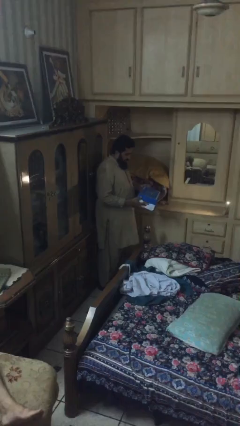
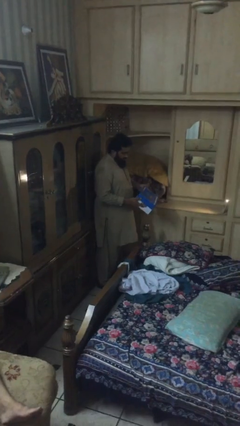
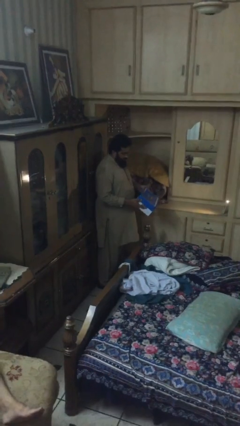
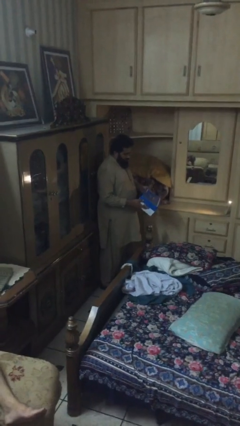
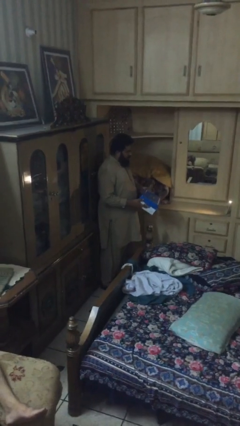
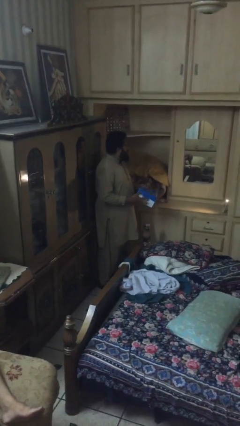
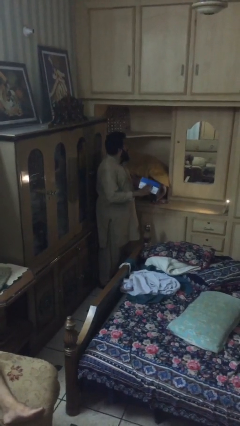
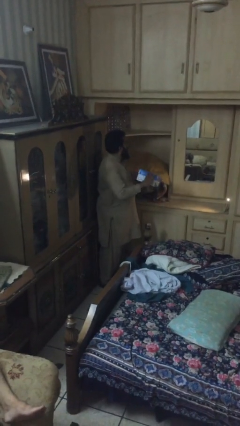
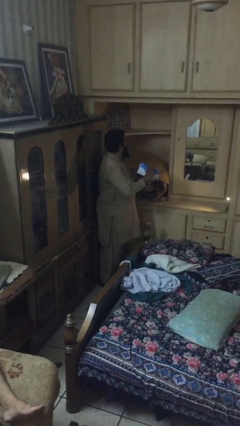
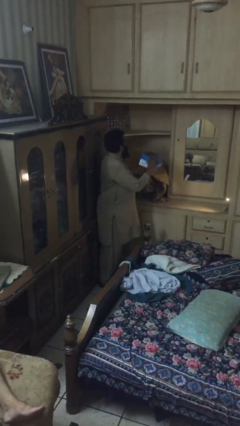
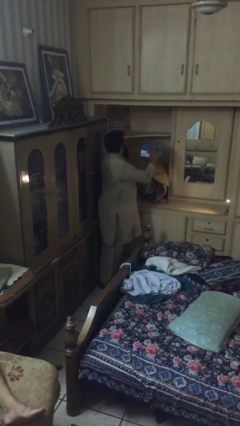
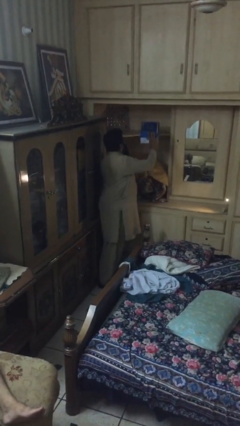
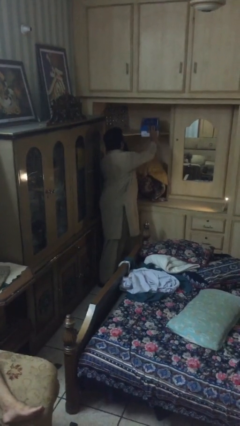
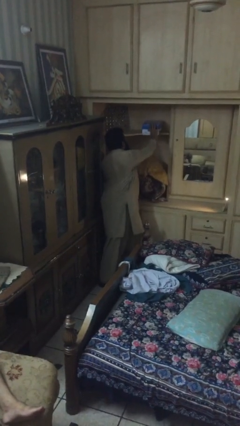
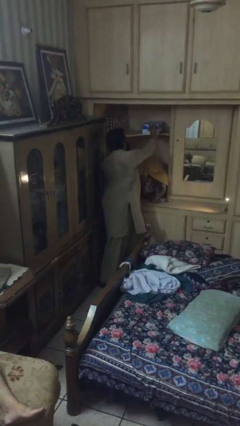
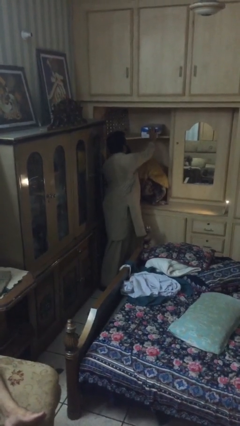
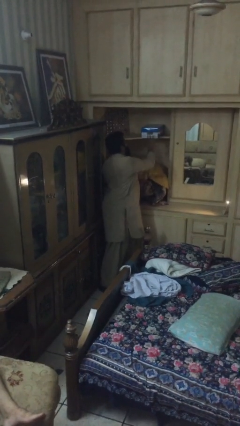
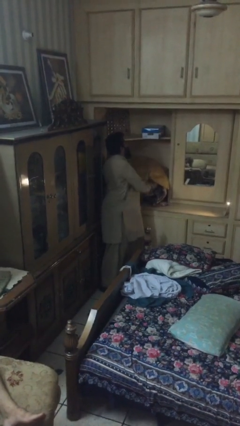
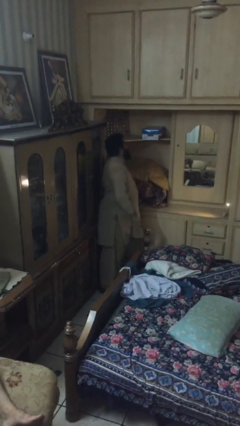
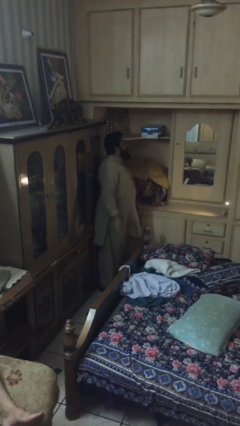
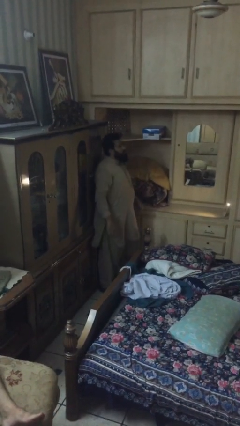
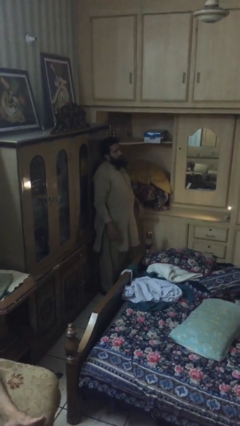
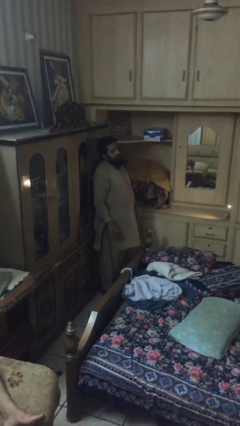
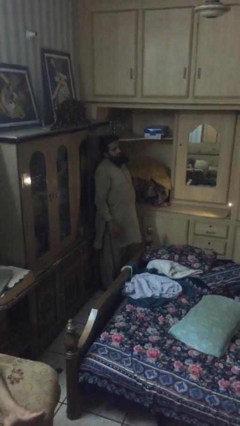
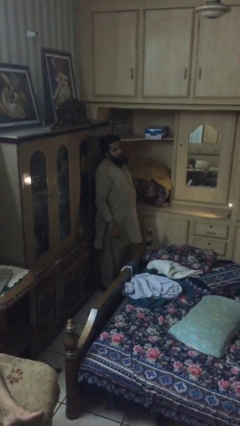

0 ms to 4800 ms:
person puts down object on shelf

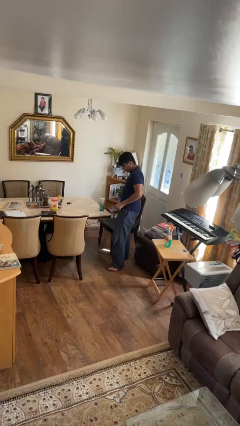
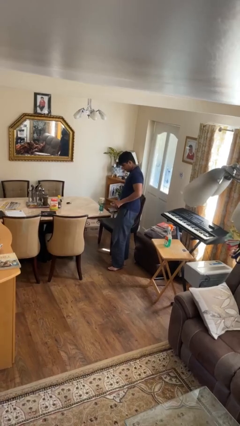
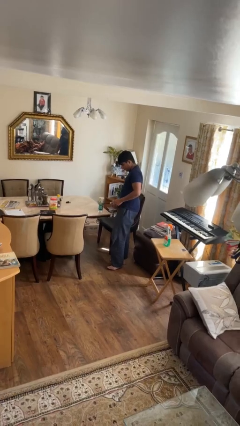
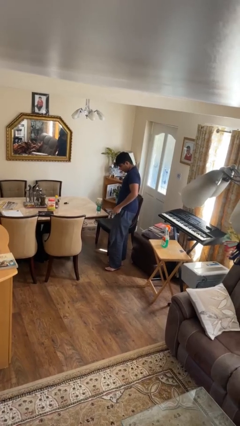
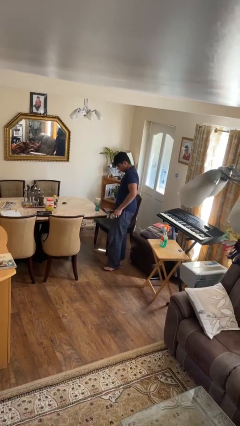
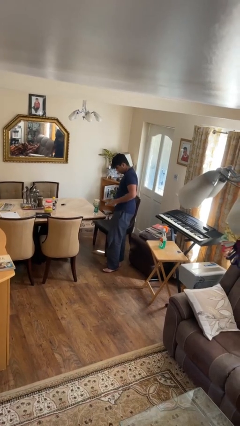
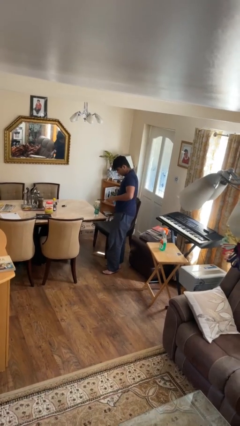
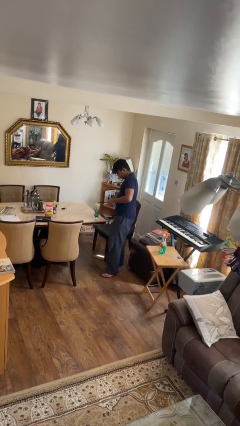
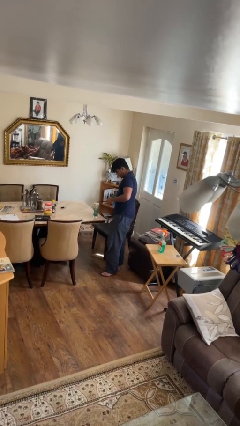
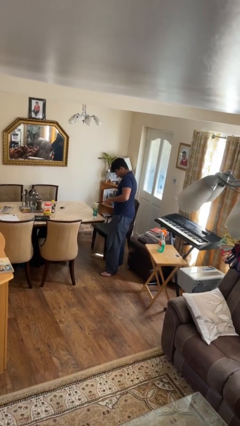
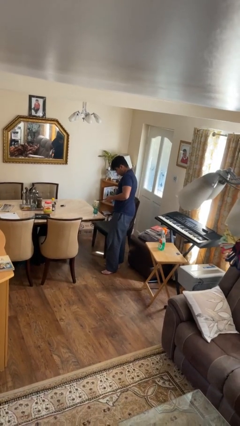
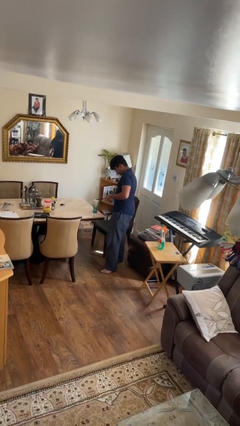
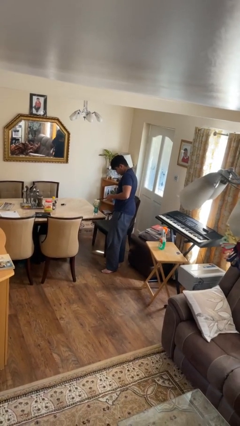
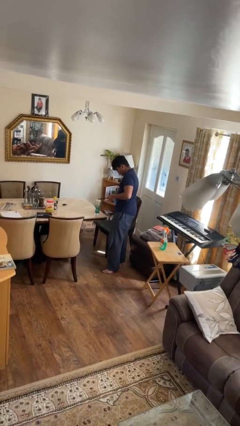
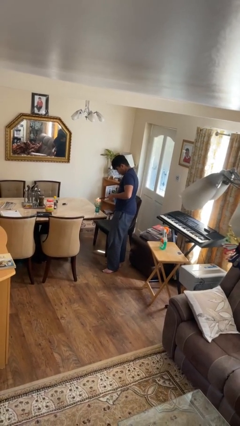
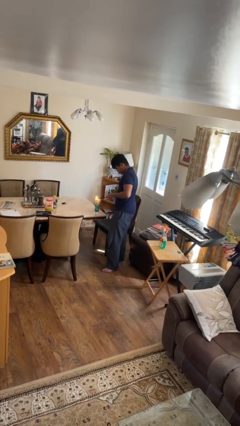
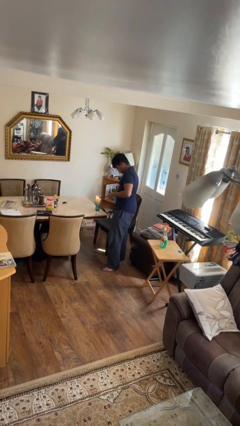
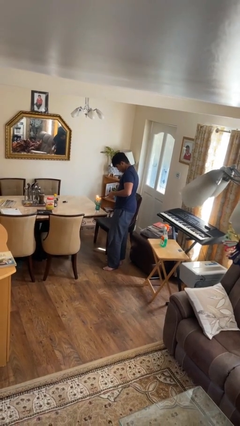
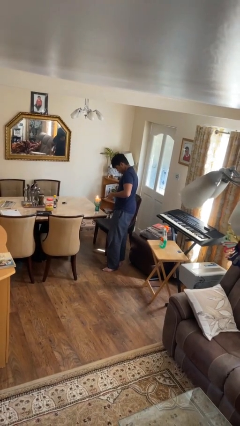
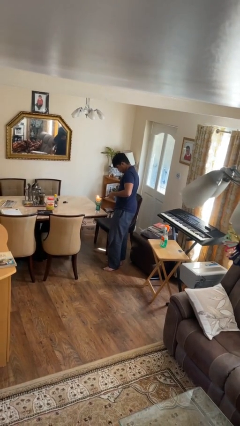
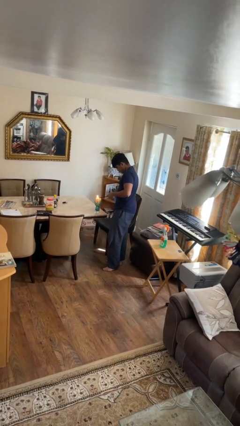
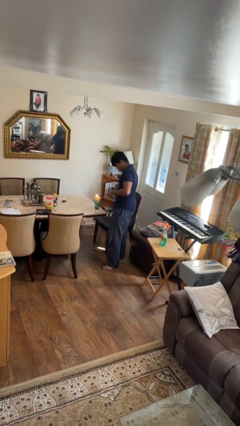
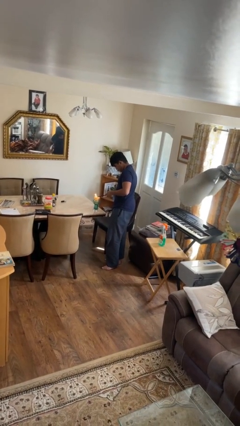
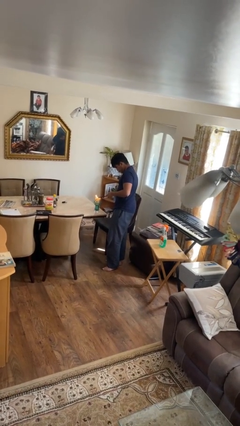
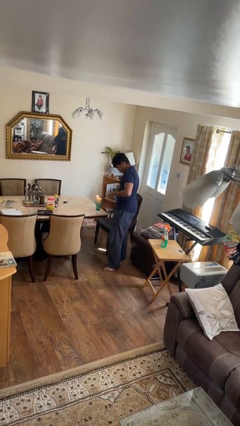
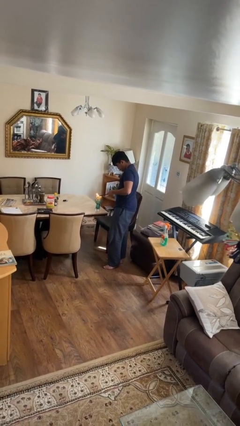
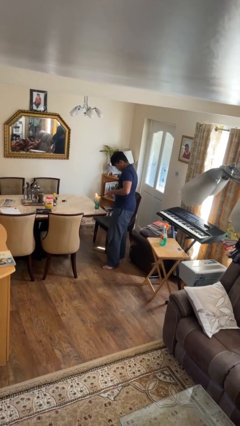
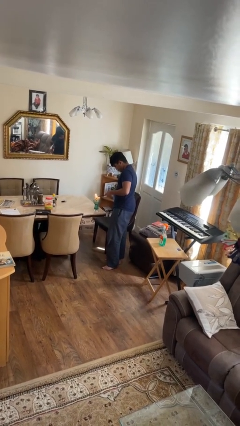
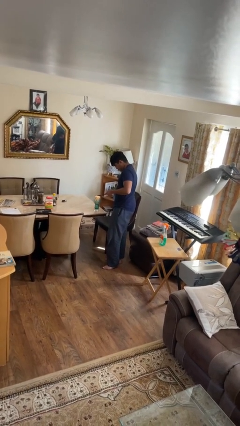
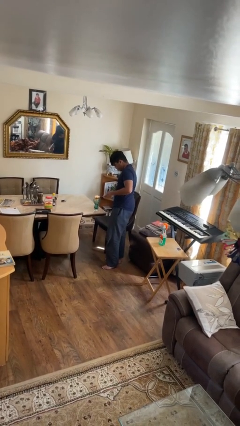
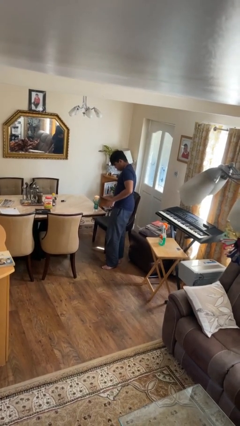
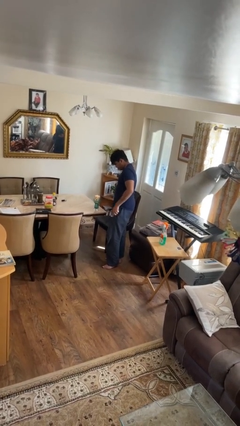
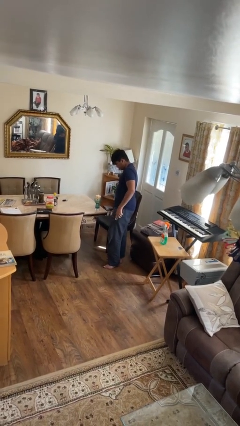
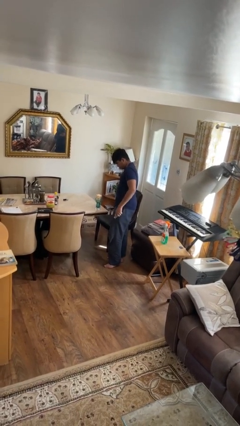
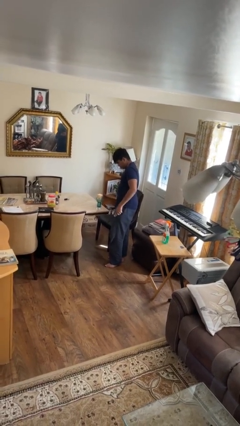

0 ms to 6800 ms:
person lights candle

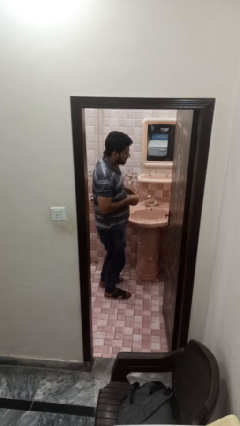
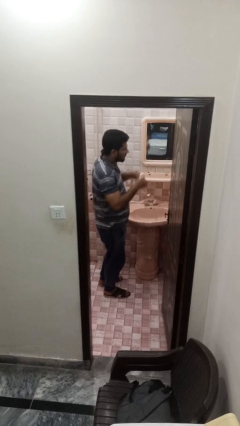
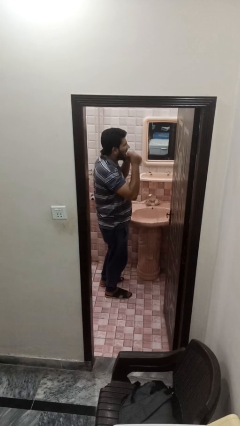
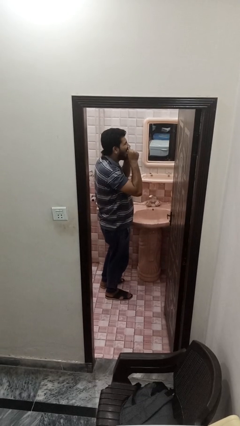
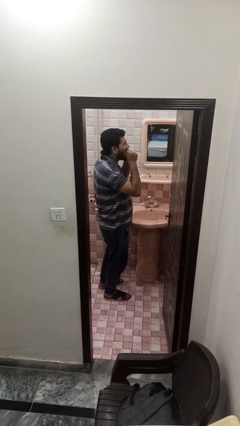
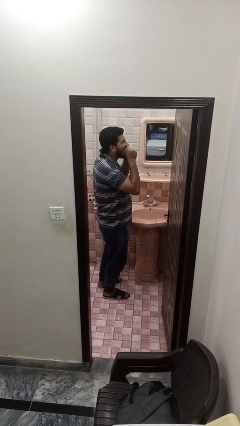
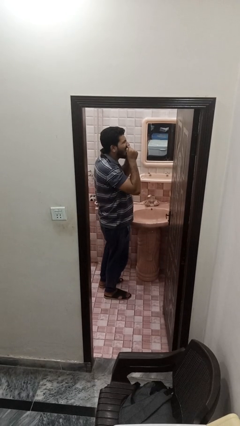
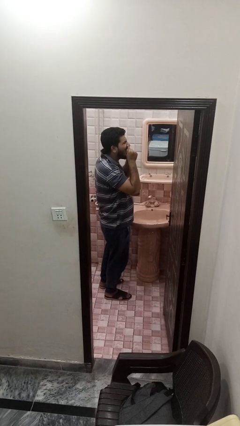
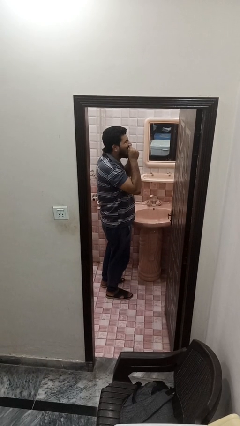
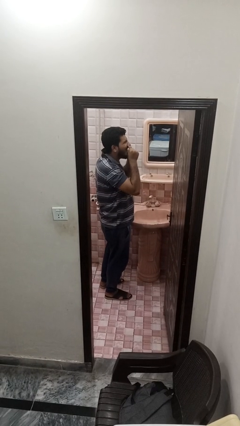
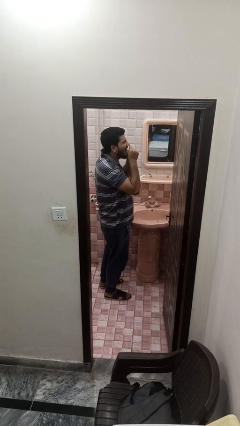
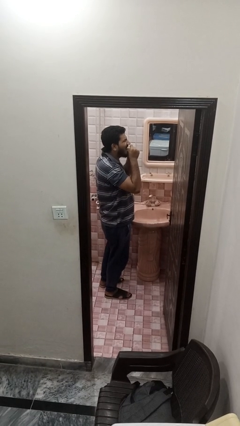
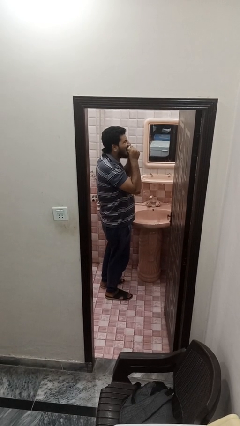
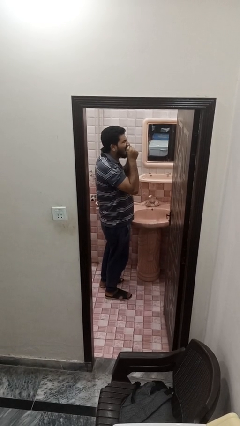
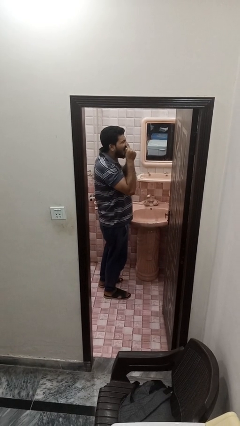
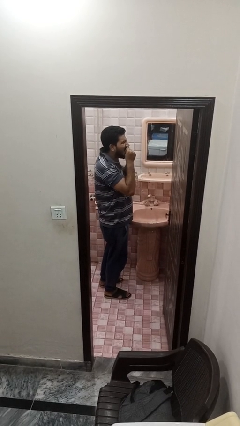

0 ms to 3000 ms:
person flosses

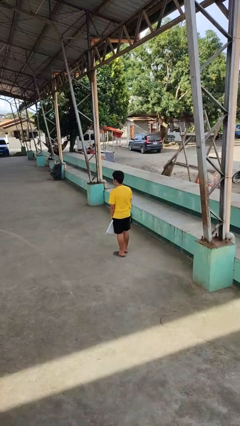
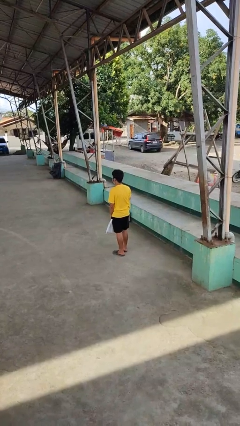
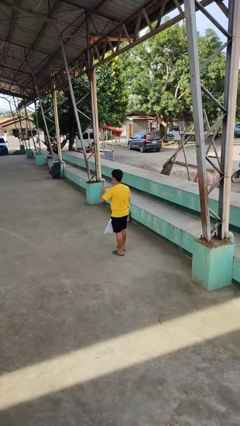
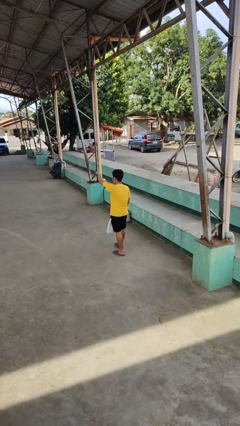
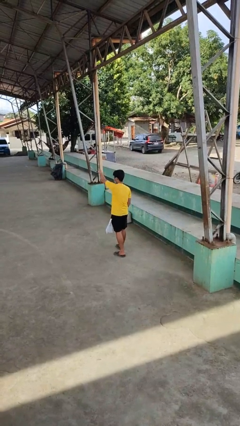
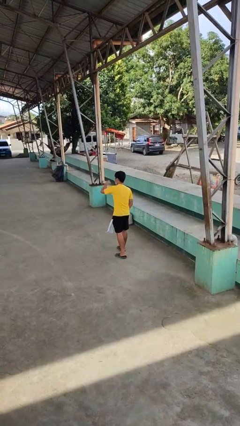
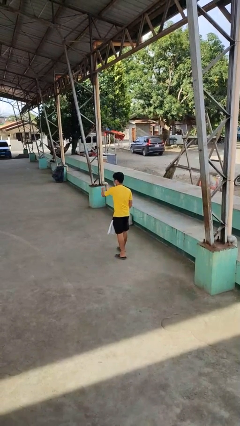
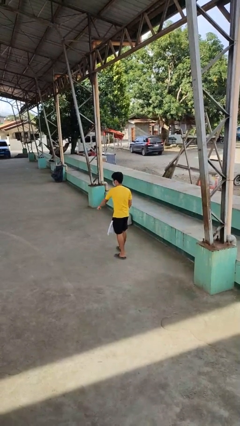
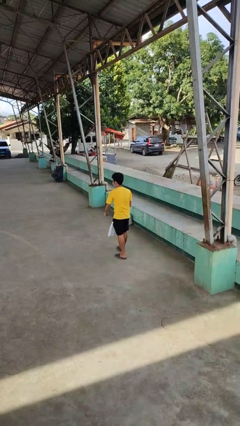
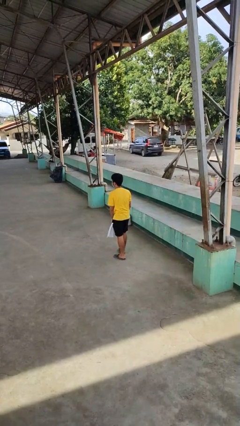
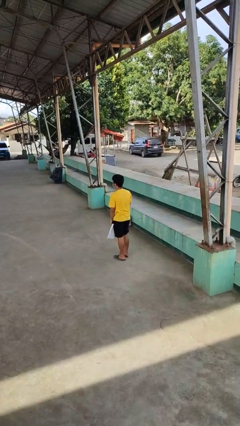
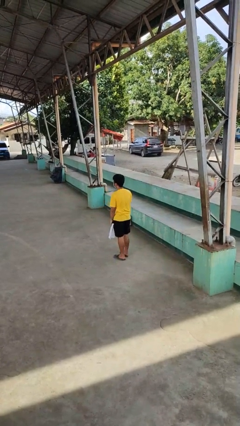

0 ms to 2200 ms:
person punches

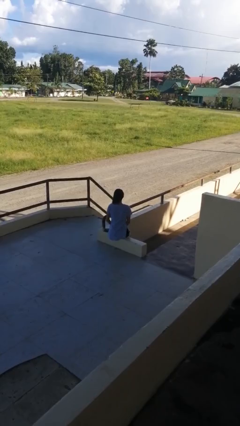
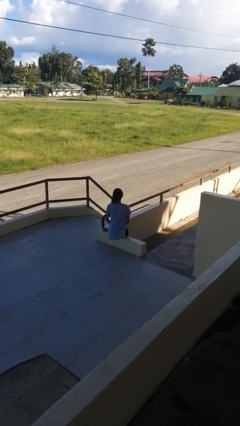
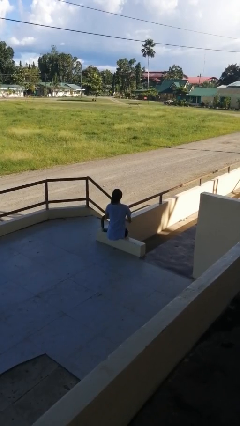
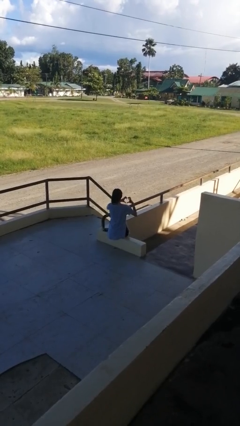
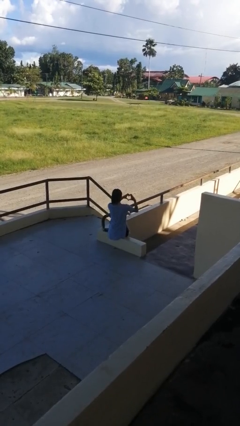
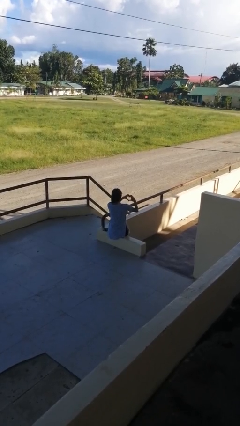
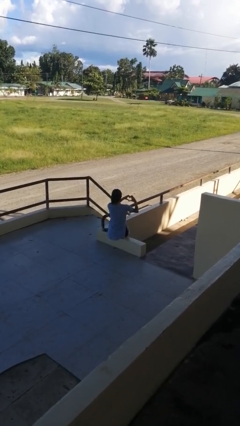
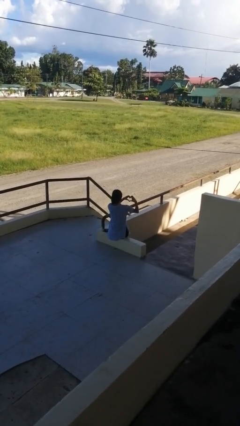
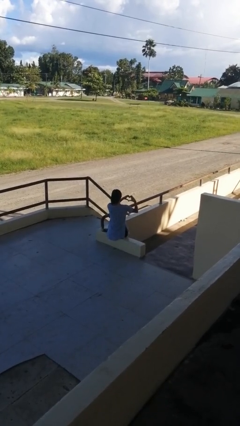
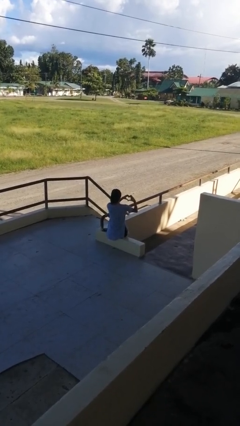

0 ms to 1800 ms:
person gestures heart
